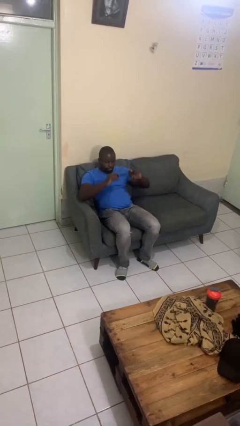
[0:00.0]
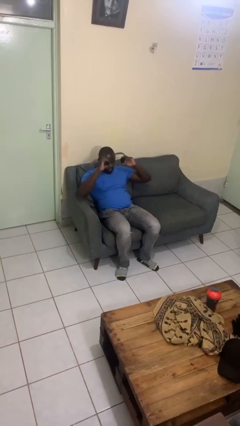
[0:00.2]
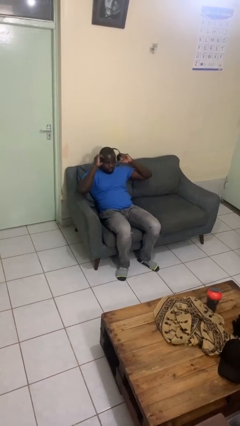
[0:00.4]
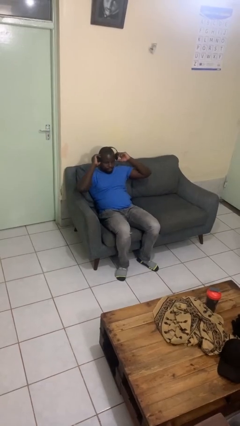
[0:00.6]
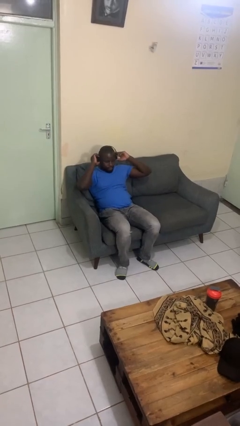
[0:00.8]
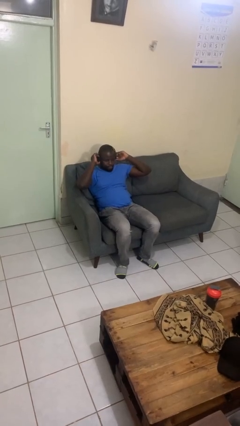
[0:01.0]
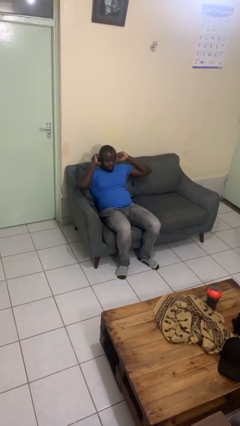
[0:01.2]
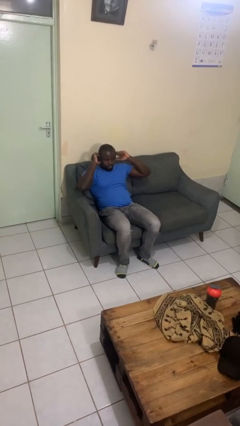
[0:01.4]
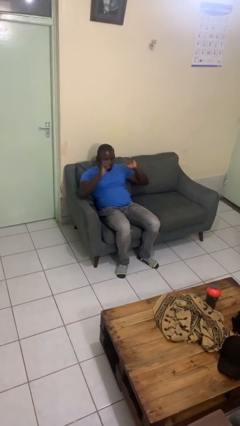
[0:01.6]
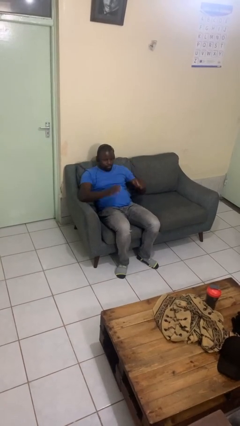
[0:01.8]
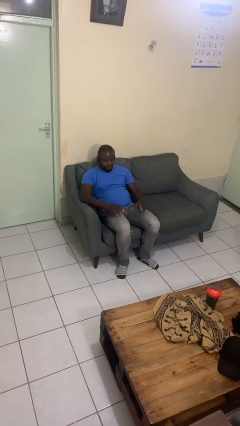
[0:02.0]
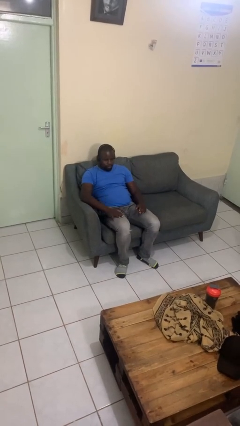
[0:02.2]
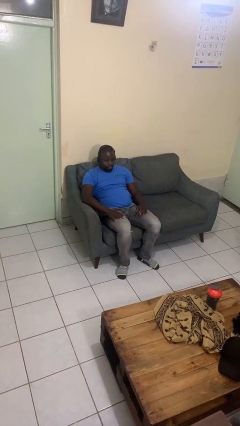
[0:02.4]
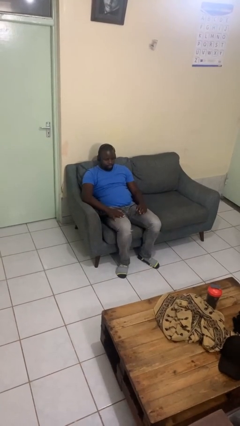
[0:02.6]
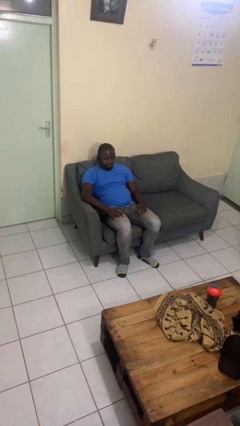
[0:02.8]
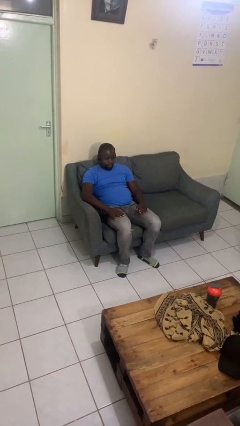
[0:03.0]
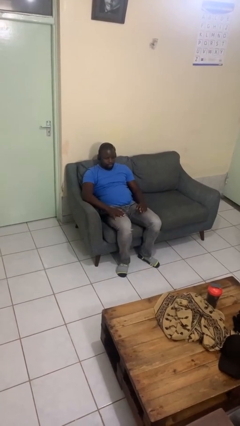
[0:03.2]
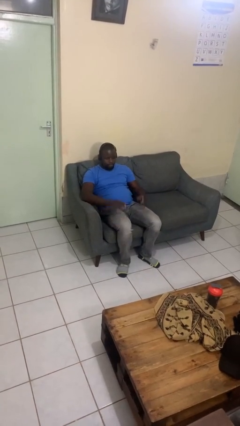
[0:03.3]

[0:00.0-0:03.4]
person puts on headphones

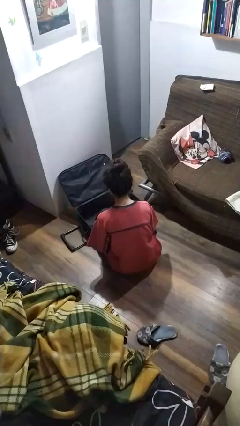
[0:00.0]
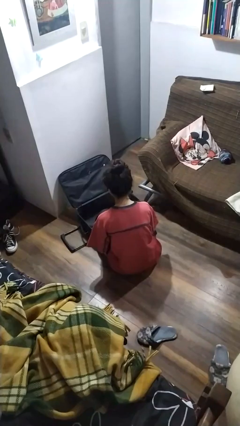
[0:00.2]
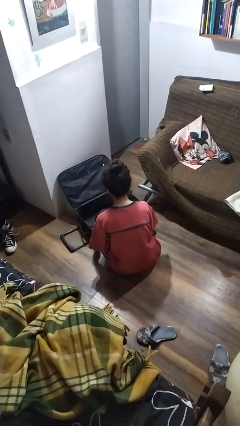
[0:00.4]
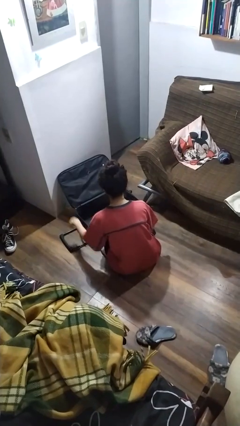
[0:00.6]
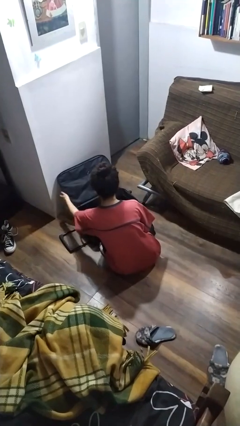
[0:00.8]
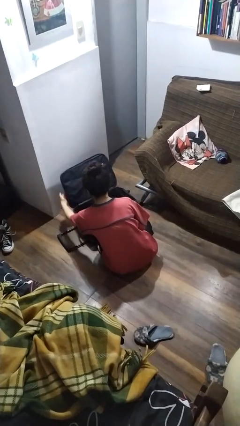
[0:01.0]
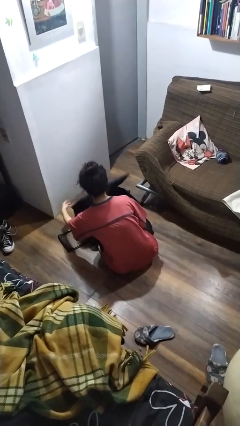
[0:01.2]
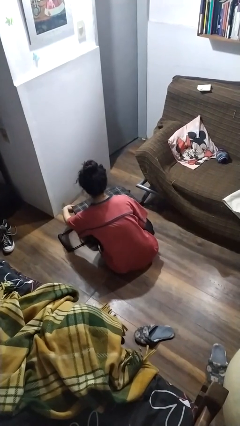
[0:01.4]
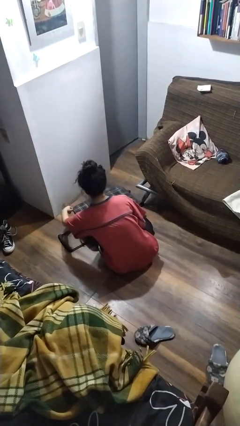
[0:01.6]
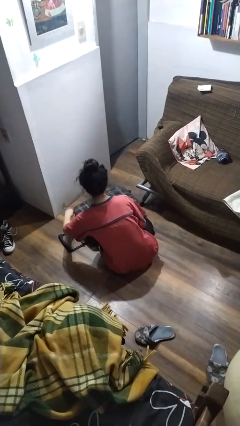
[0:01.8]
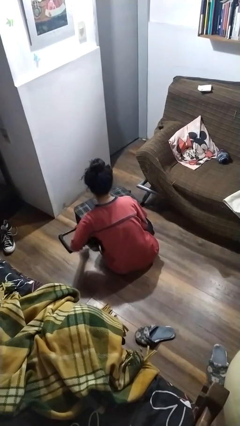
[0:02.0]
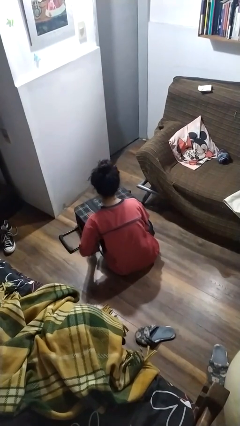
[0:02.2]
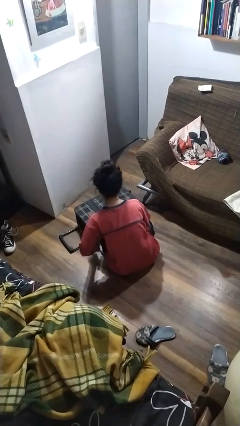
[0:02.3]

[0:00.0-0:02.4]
person closes suitcase

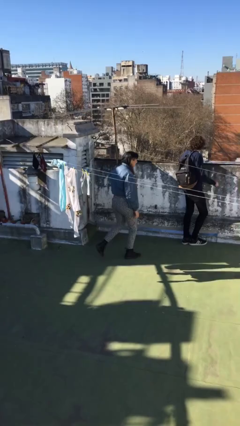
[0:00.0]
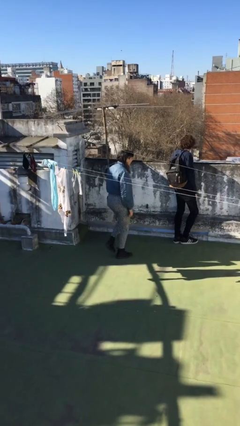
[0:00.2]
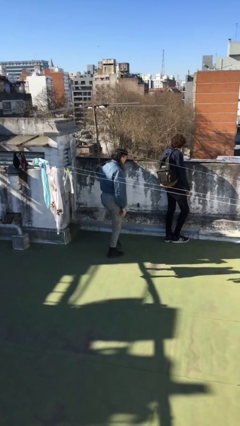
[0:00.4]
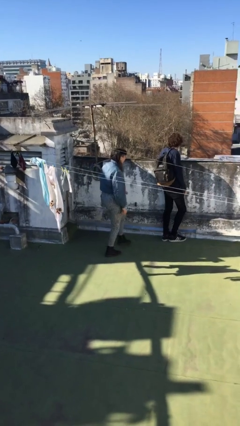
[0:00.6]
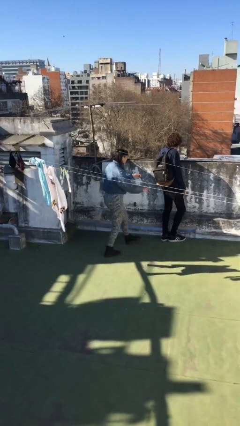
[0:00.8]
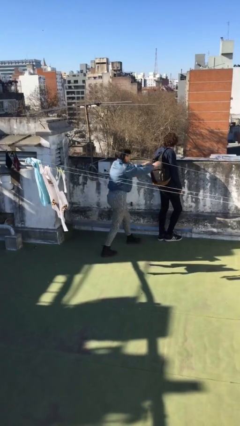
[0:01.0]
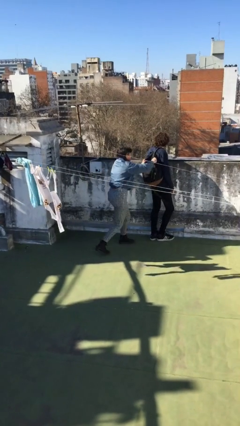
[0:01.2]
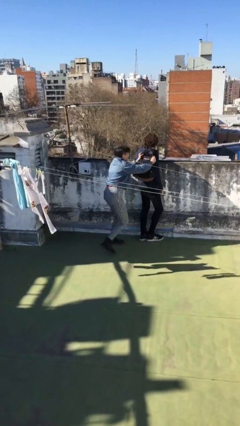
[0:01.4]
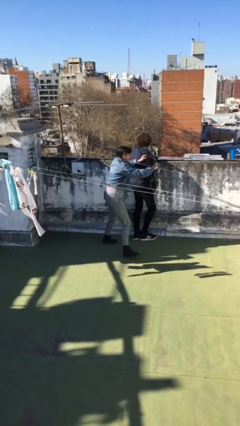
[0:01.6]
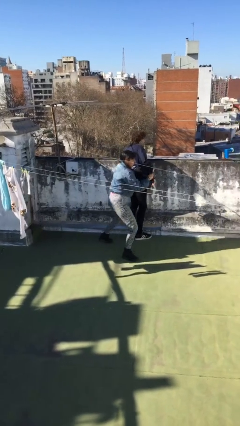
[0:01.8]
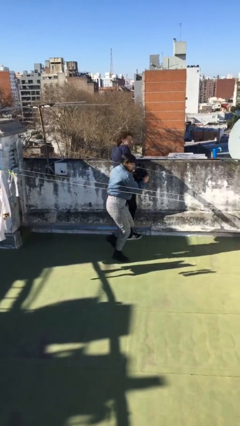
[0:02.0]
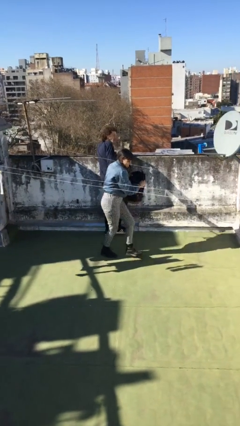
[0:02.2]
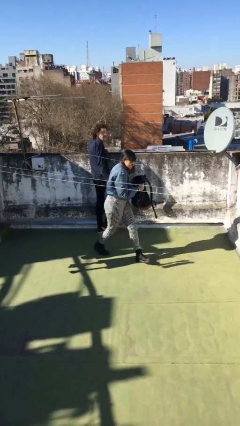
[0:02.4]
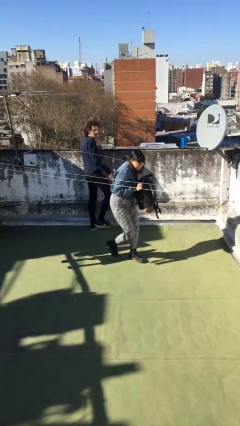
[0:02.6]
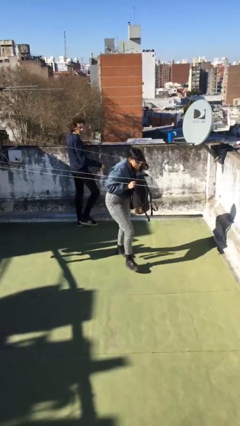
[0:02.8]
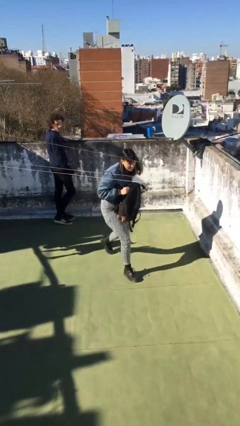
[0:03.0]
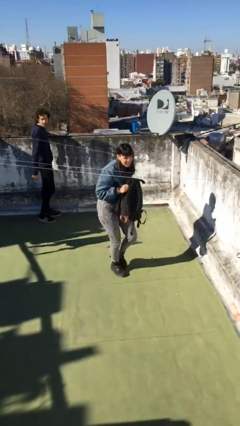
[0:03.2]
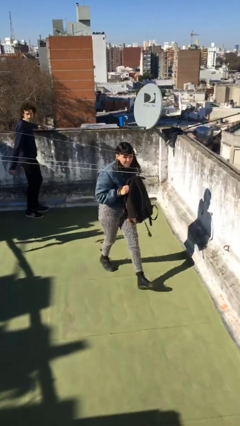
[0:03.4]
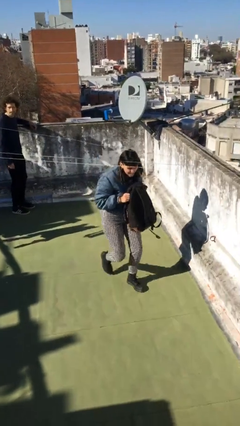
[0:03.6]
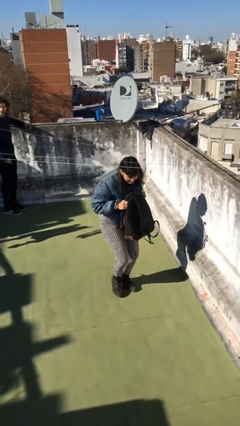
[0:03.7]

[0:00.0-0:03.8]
person steals object from person

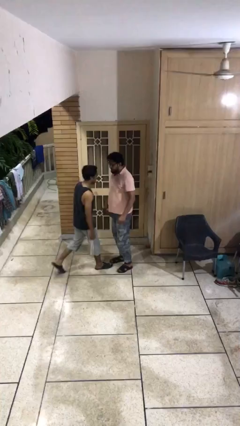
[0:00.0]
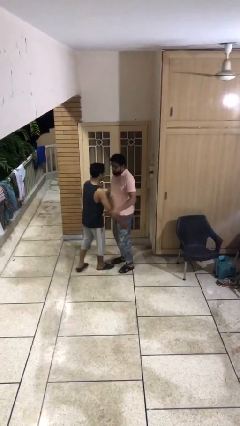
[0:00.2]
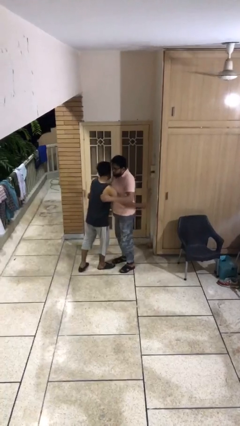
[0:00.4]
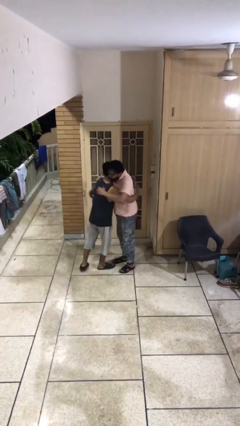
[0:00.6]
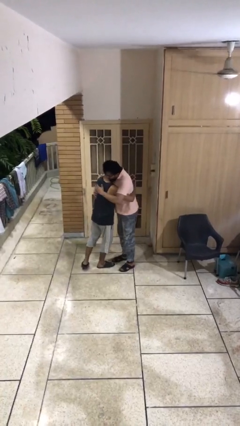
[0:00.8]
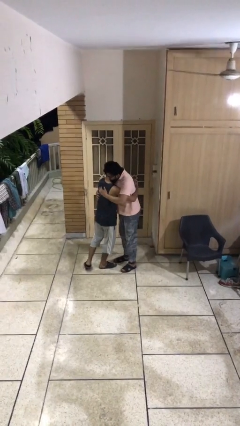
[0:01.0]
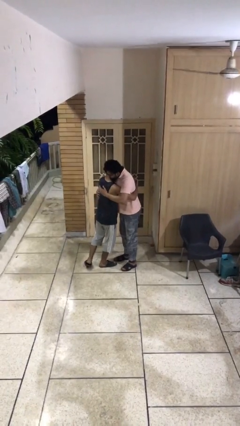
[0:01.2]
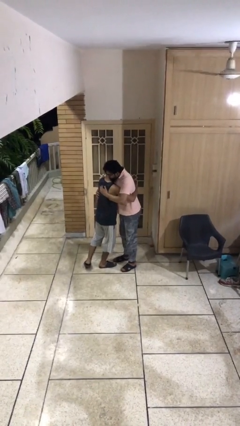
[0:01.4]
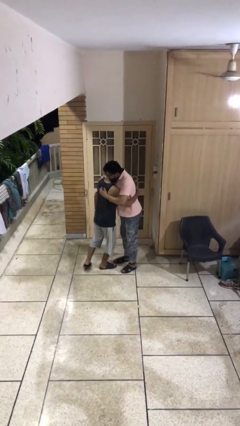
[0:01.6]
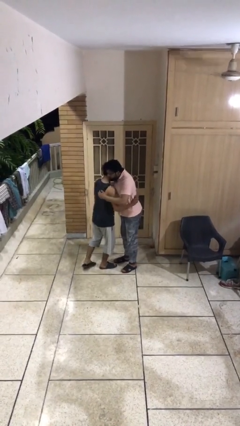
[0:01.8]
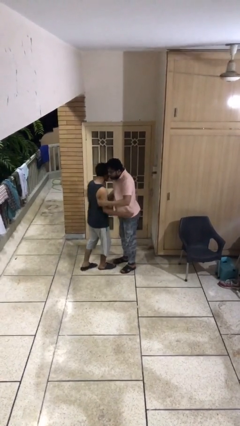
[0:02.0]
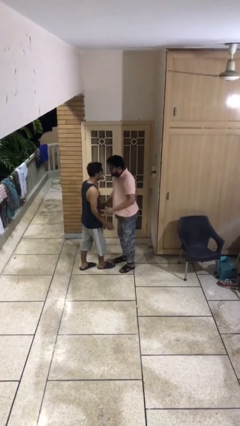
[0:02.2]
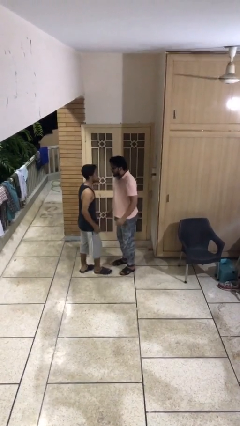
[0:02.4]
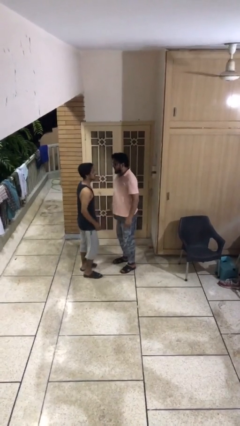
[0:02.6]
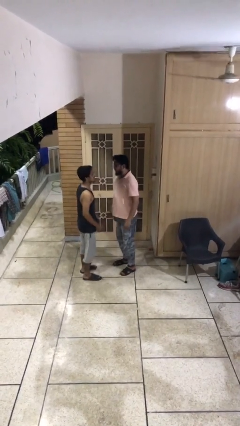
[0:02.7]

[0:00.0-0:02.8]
person embraces person

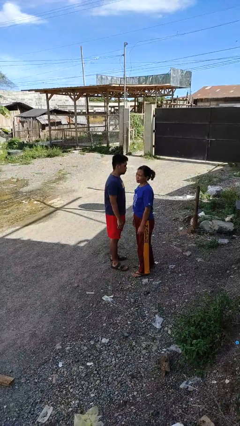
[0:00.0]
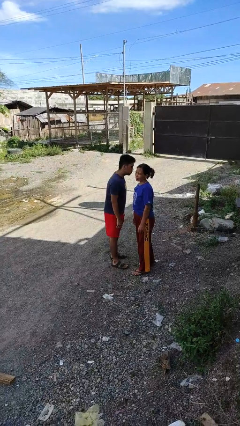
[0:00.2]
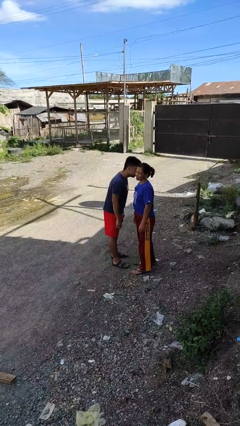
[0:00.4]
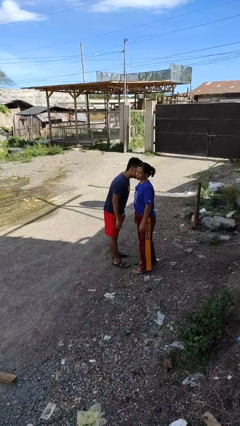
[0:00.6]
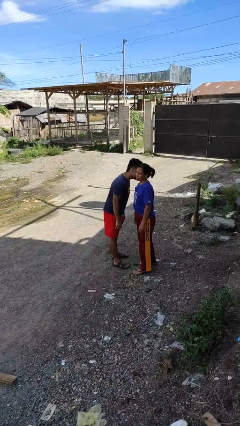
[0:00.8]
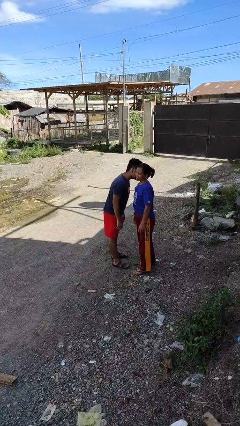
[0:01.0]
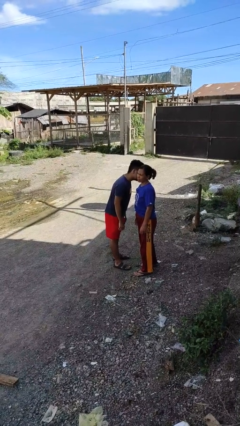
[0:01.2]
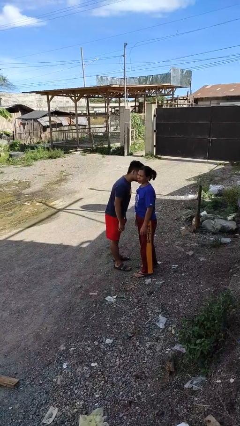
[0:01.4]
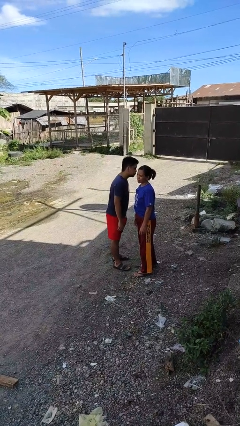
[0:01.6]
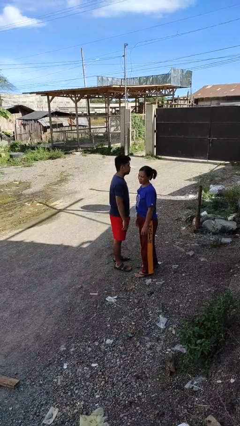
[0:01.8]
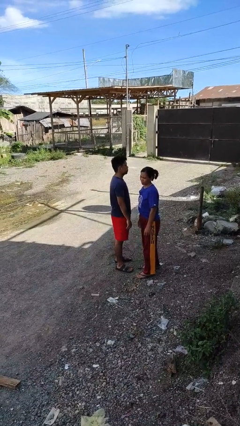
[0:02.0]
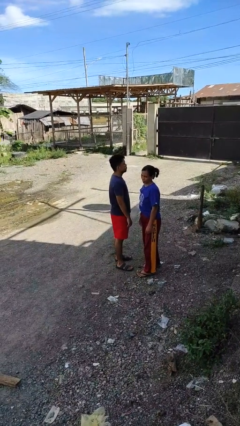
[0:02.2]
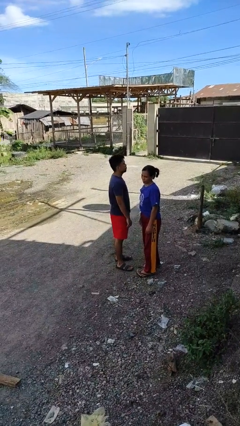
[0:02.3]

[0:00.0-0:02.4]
person kisses cheek of person

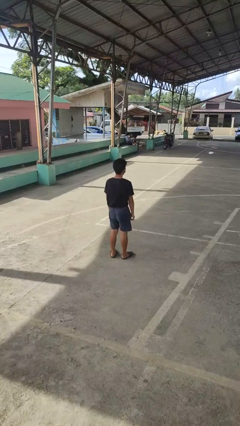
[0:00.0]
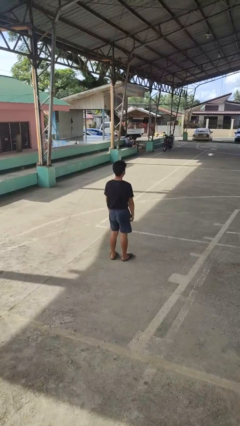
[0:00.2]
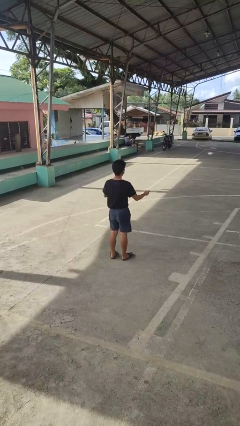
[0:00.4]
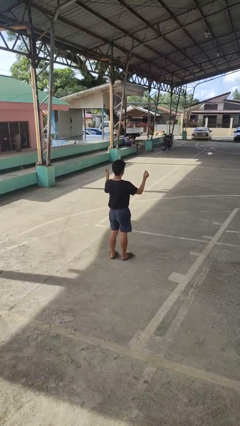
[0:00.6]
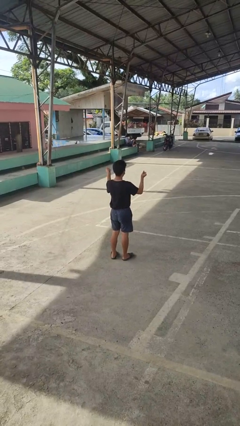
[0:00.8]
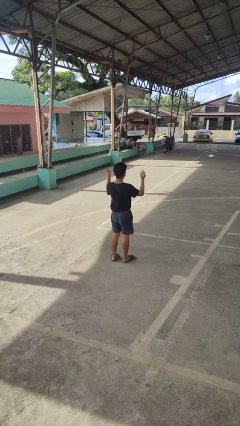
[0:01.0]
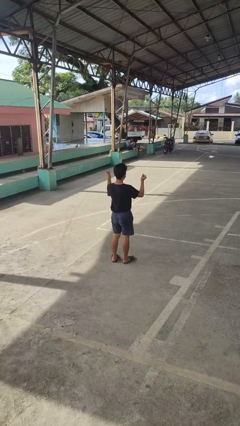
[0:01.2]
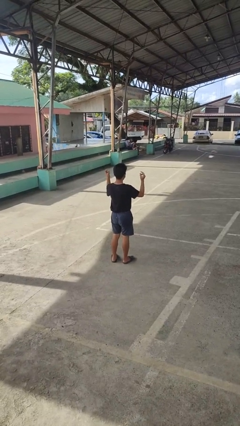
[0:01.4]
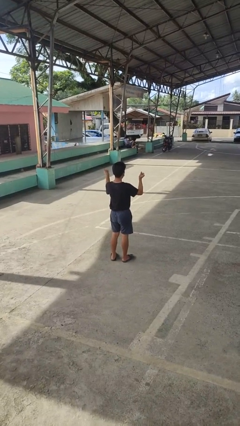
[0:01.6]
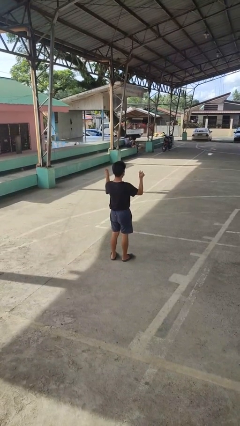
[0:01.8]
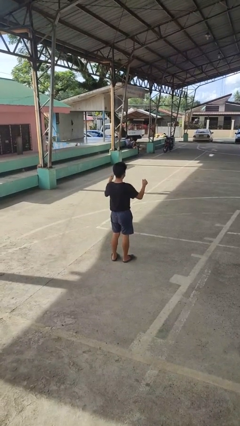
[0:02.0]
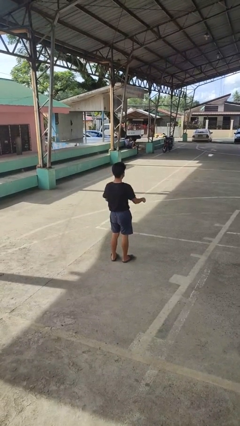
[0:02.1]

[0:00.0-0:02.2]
person snaps fingers

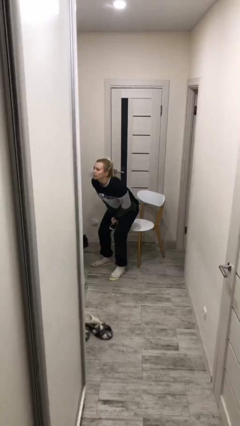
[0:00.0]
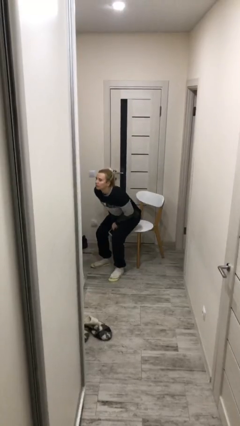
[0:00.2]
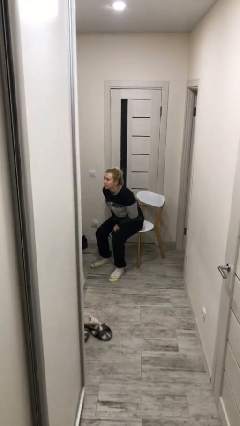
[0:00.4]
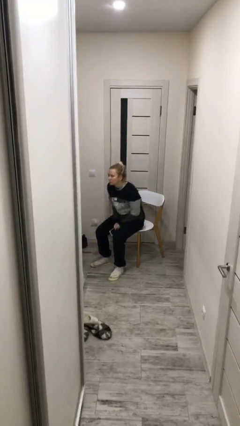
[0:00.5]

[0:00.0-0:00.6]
person sits down
